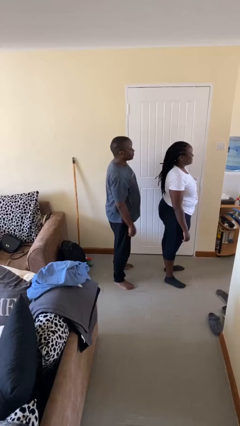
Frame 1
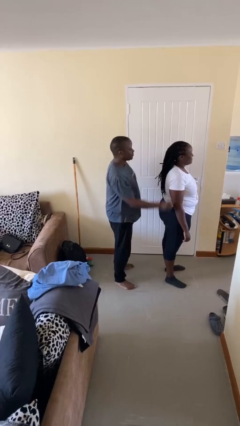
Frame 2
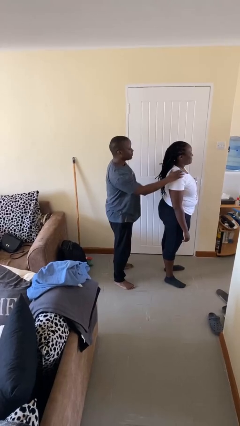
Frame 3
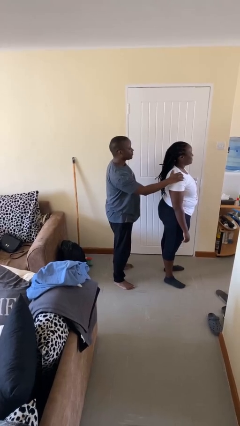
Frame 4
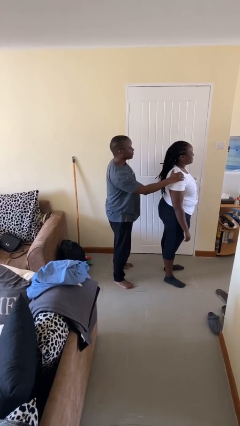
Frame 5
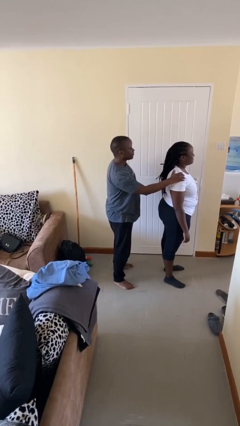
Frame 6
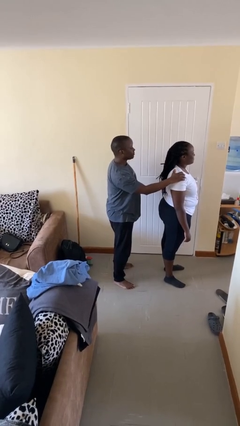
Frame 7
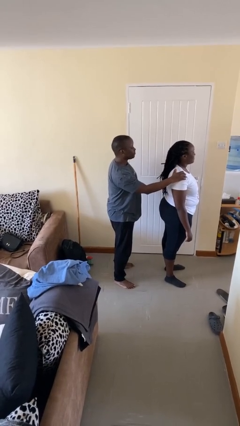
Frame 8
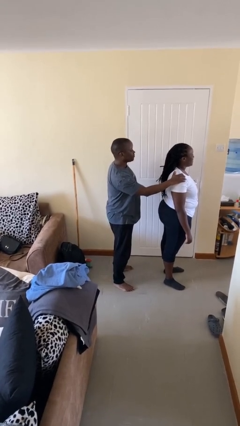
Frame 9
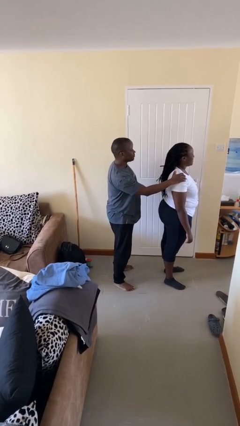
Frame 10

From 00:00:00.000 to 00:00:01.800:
person grabs person by shoulder

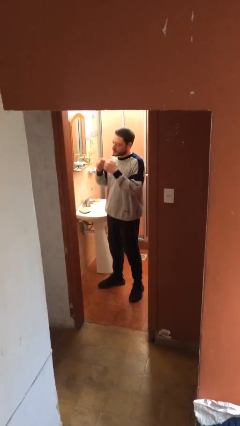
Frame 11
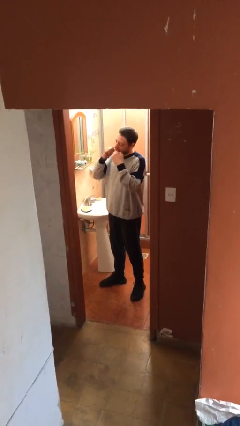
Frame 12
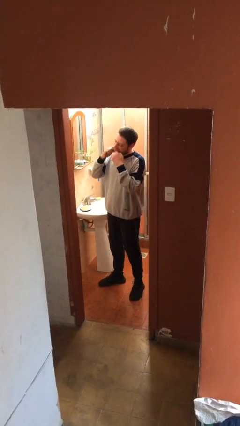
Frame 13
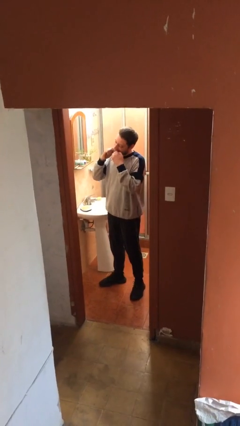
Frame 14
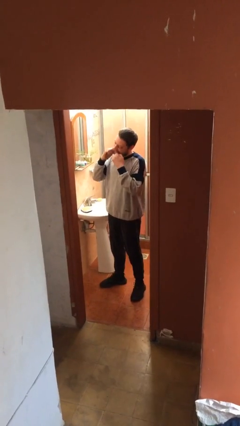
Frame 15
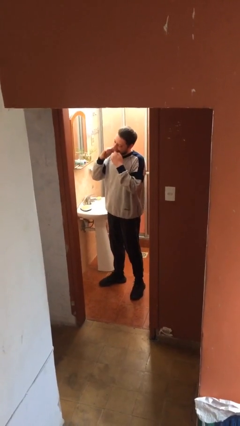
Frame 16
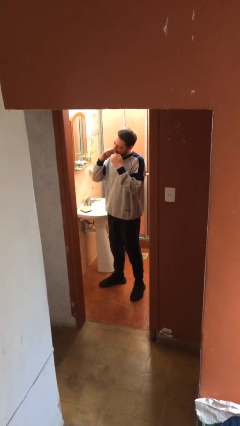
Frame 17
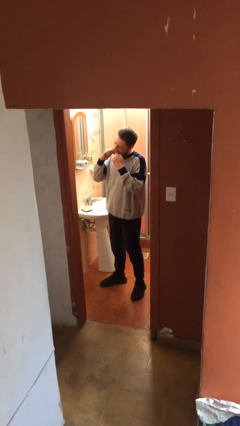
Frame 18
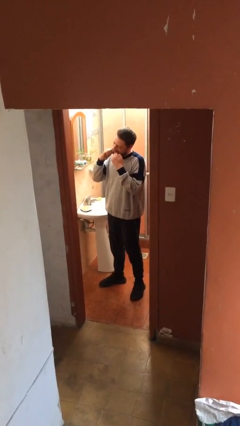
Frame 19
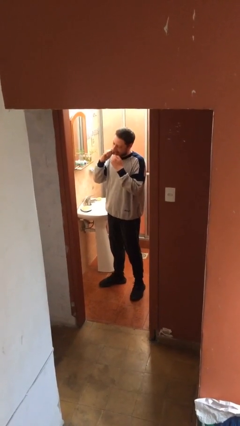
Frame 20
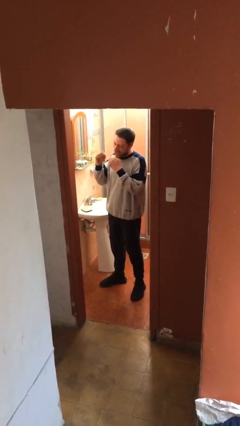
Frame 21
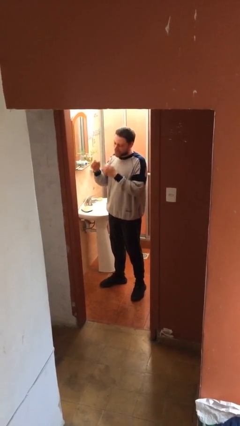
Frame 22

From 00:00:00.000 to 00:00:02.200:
person flosses

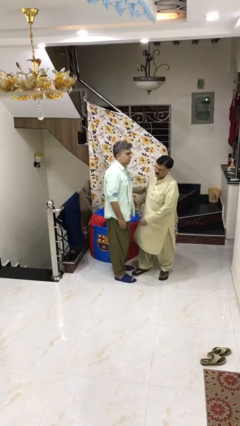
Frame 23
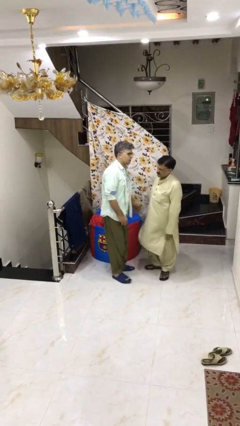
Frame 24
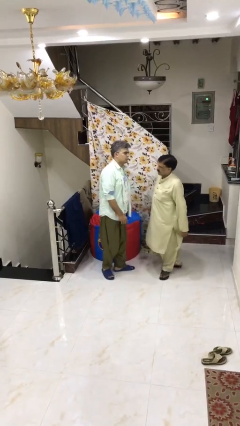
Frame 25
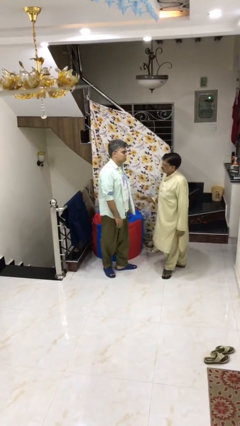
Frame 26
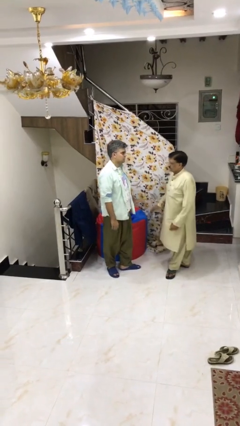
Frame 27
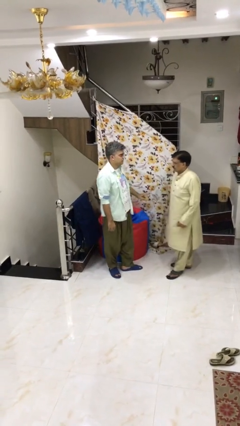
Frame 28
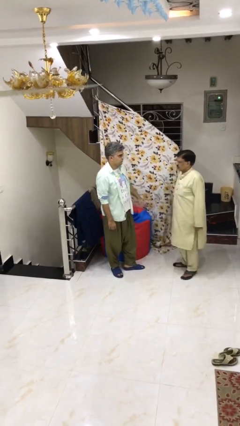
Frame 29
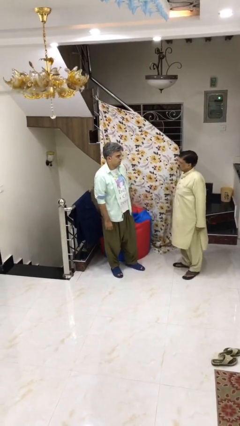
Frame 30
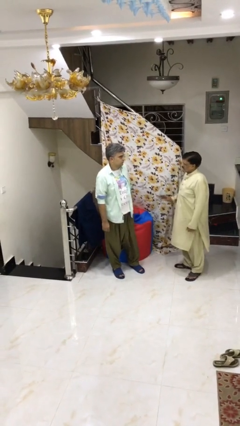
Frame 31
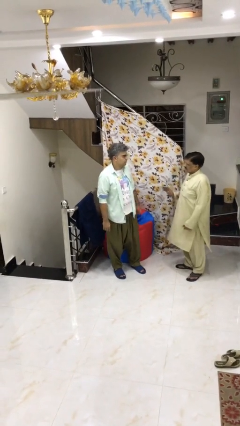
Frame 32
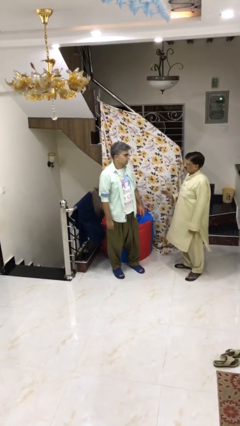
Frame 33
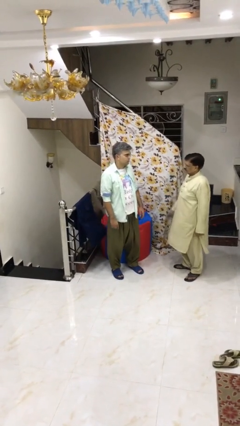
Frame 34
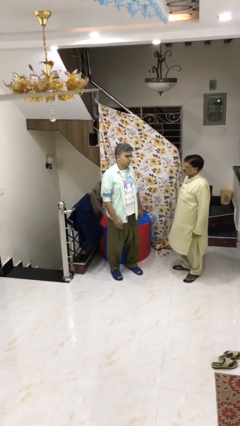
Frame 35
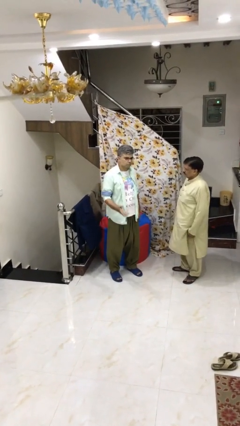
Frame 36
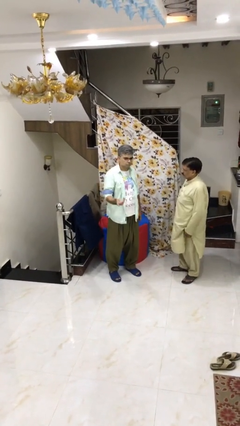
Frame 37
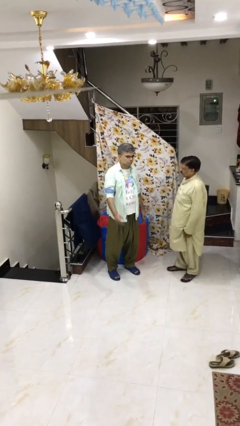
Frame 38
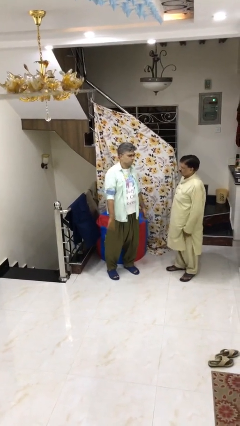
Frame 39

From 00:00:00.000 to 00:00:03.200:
person talks to person

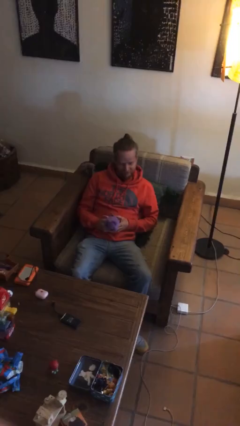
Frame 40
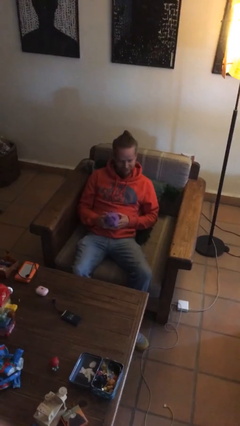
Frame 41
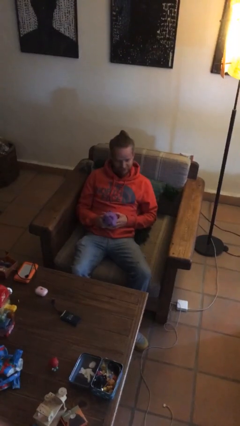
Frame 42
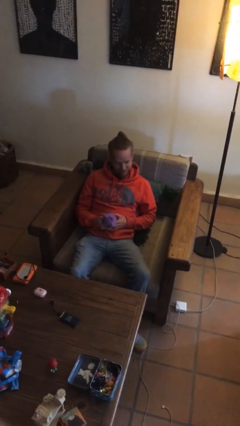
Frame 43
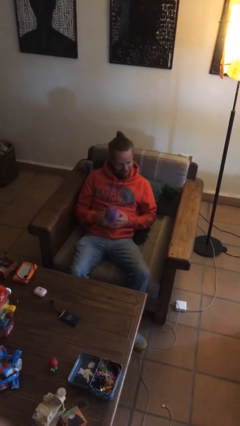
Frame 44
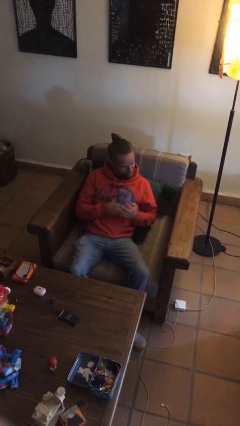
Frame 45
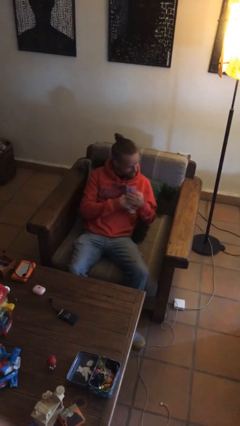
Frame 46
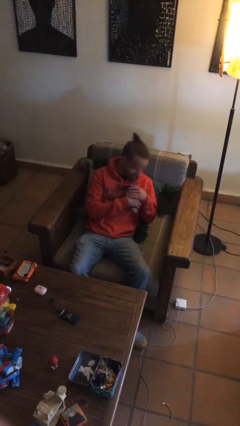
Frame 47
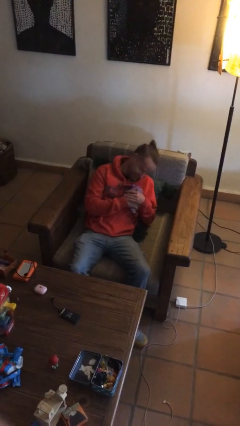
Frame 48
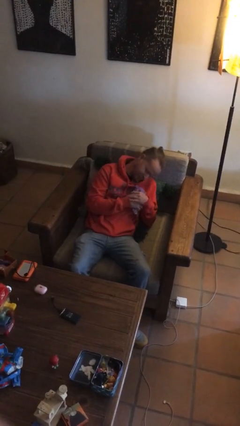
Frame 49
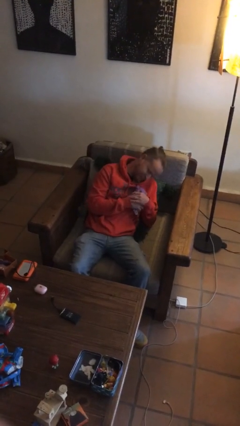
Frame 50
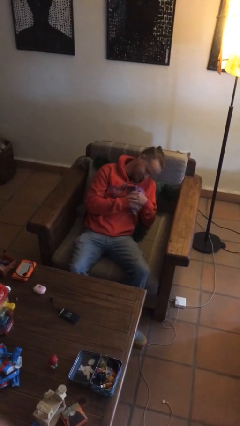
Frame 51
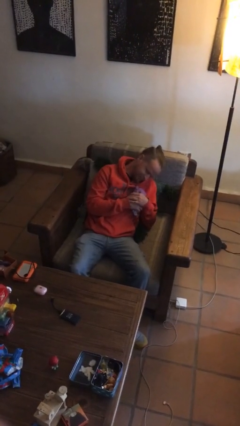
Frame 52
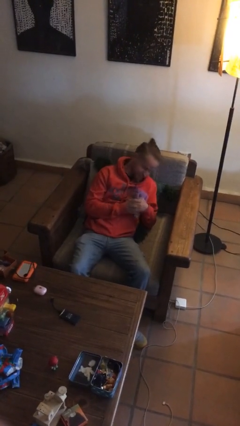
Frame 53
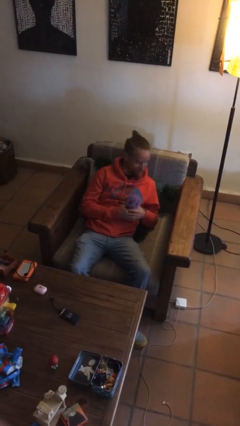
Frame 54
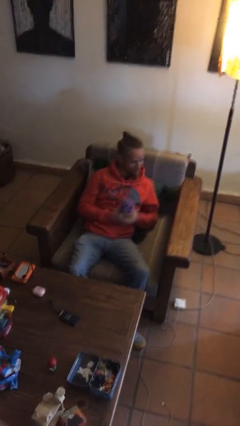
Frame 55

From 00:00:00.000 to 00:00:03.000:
person hugs stuffed animal

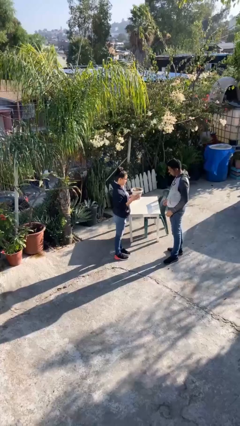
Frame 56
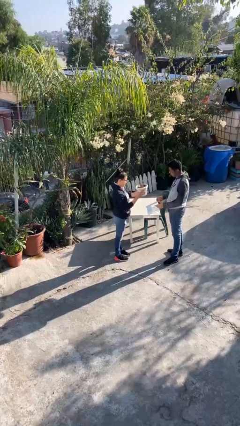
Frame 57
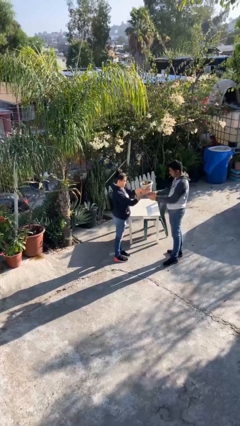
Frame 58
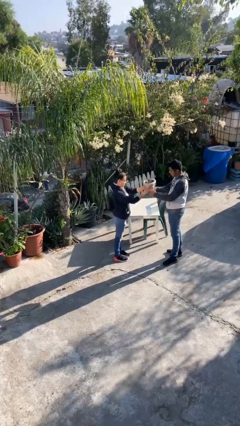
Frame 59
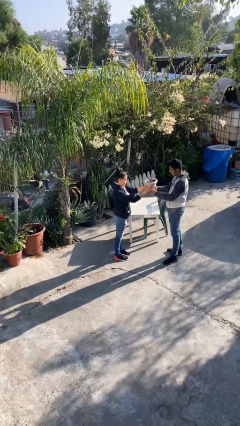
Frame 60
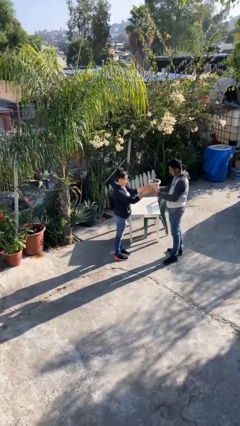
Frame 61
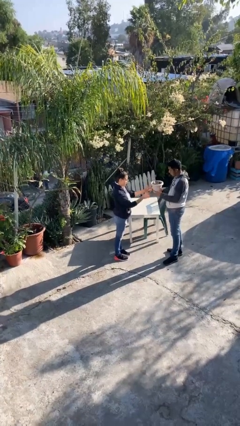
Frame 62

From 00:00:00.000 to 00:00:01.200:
person transfers object to person

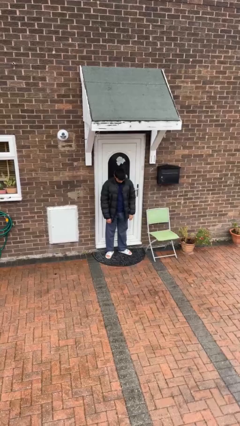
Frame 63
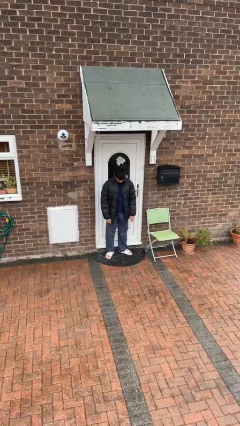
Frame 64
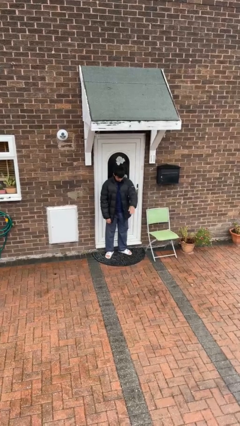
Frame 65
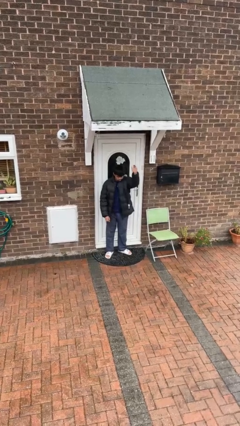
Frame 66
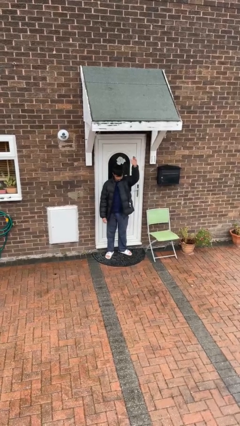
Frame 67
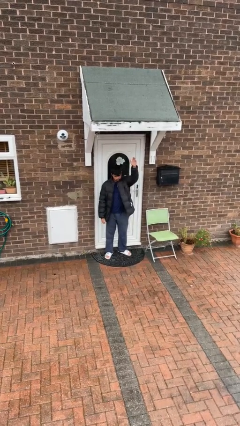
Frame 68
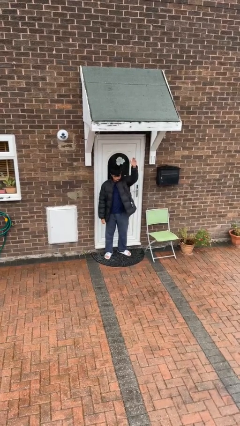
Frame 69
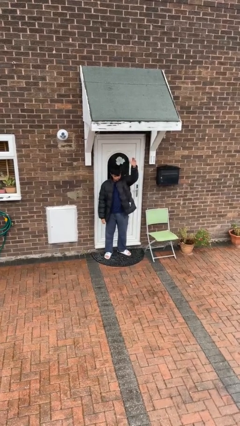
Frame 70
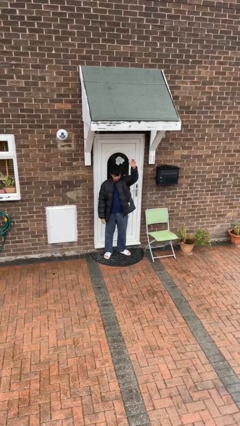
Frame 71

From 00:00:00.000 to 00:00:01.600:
person gestures swipe up

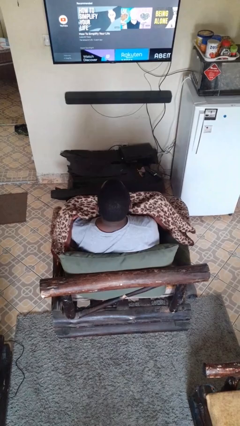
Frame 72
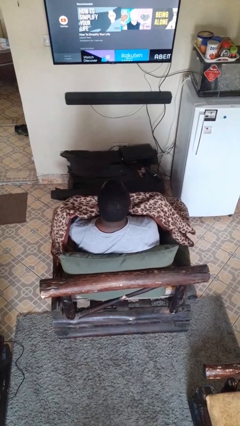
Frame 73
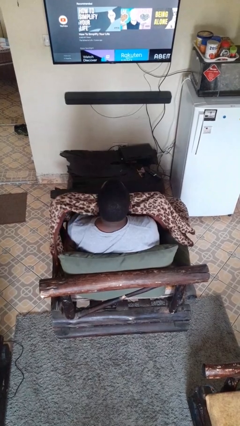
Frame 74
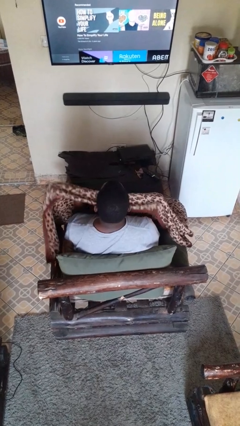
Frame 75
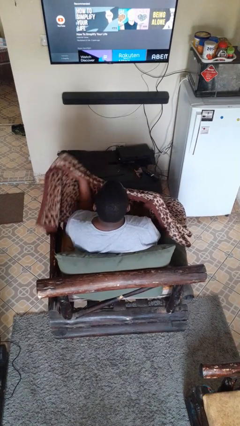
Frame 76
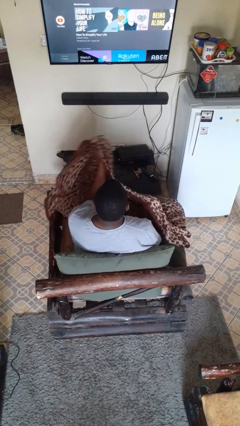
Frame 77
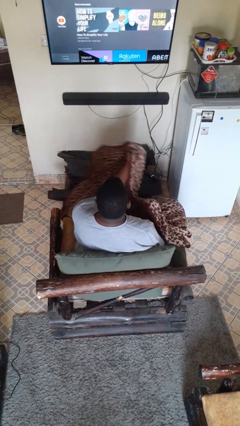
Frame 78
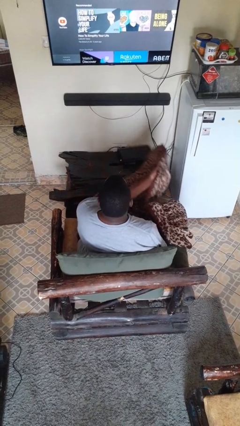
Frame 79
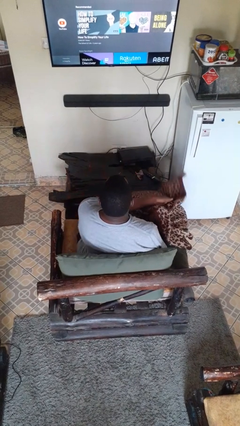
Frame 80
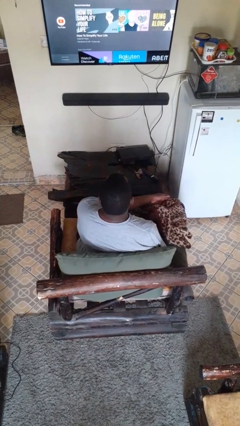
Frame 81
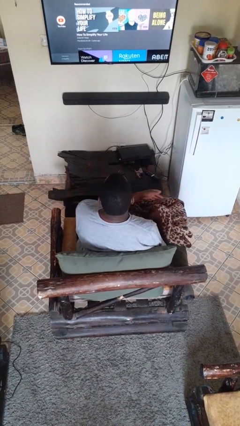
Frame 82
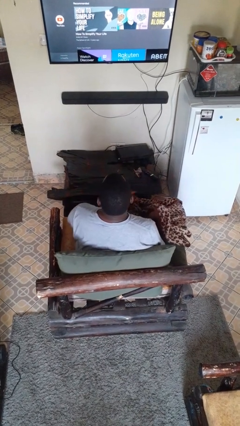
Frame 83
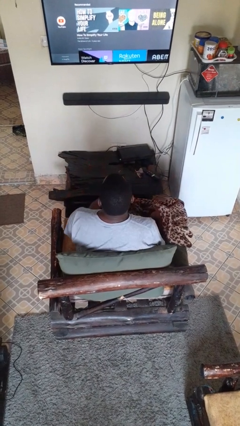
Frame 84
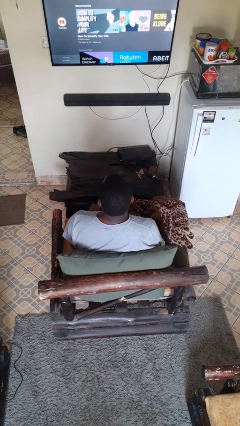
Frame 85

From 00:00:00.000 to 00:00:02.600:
person uncovers with blanket

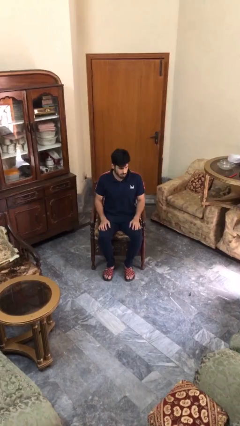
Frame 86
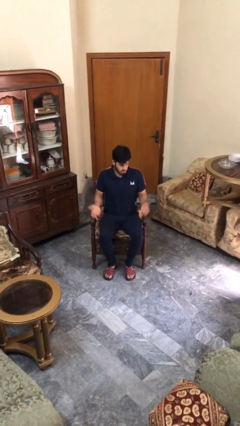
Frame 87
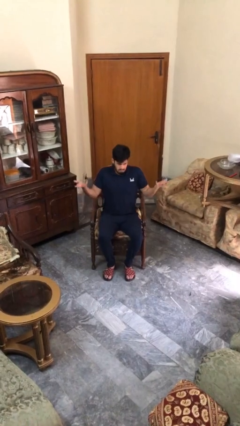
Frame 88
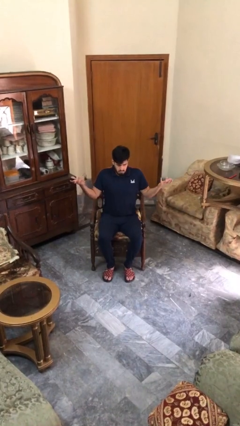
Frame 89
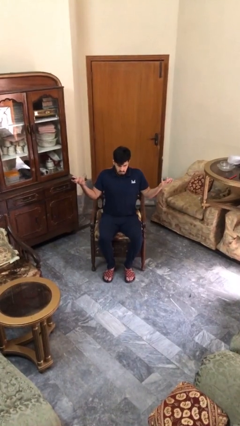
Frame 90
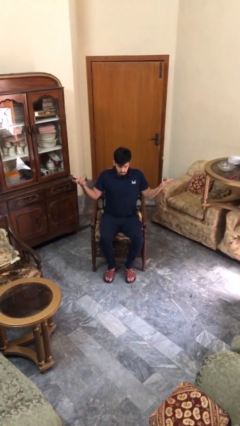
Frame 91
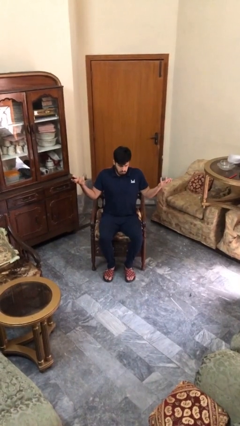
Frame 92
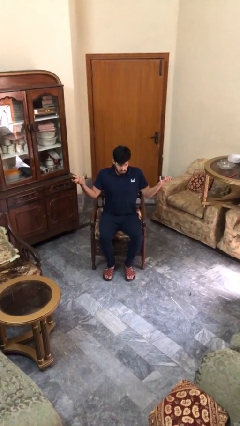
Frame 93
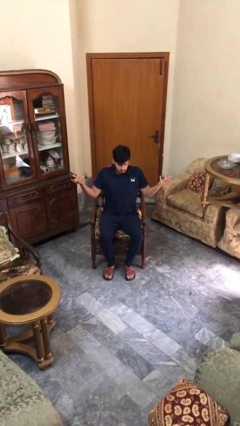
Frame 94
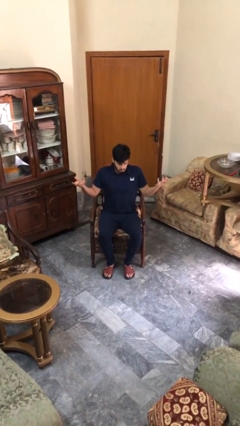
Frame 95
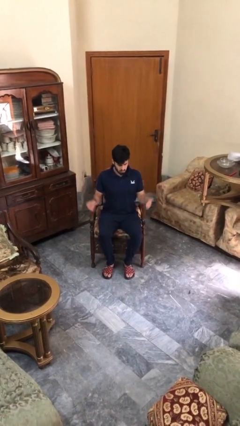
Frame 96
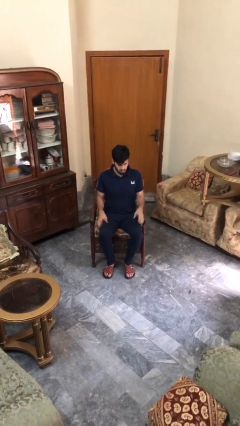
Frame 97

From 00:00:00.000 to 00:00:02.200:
person shrugs
